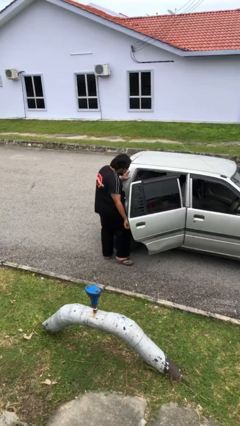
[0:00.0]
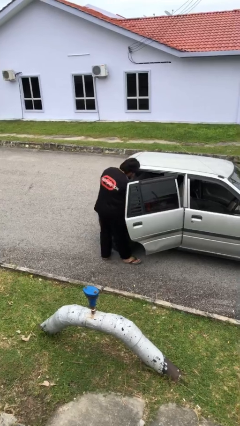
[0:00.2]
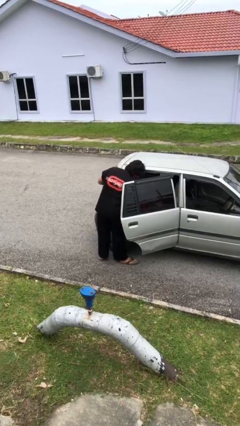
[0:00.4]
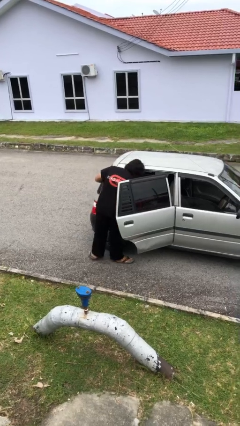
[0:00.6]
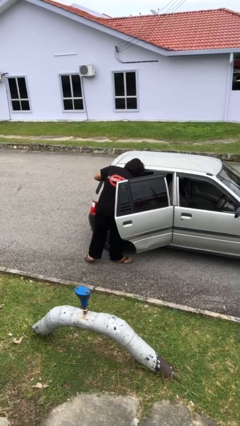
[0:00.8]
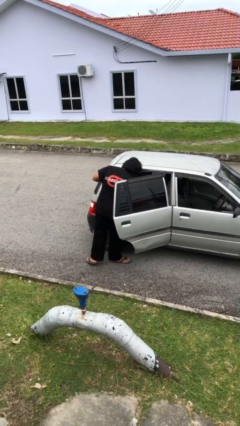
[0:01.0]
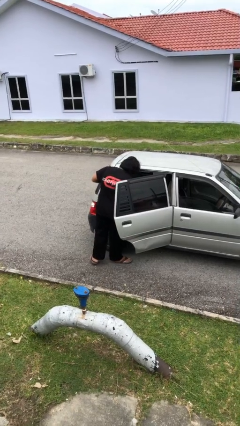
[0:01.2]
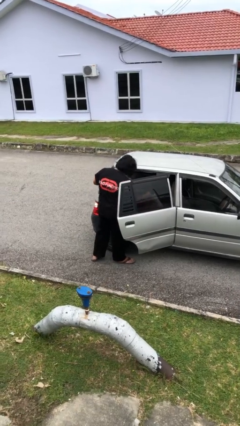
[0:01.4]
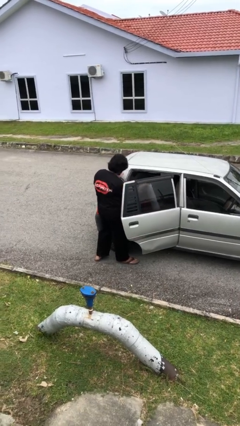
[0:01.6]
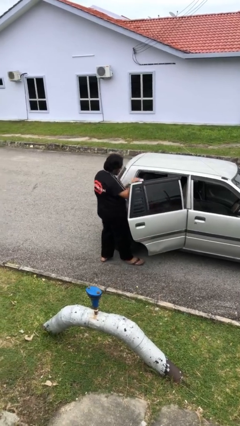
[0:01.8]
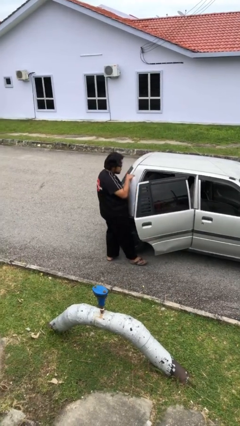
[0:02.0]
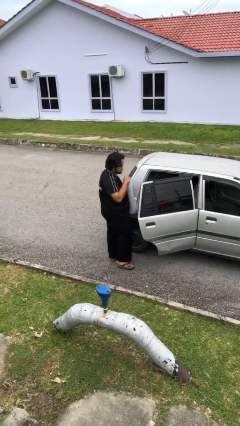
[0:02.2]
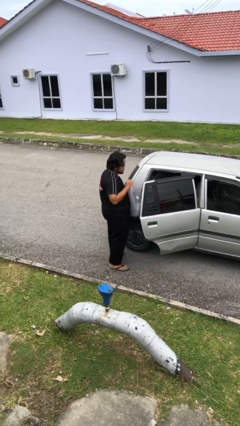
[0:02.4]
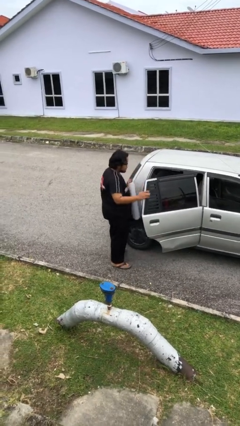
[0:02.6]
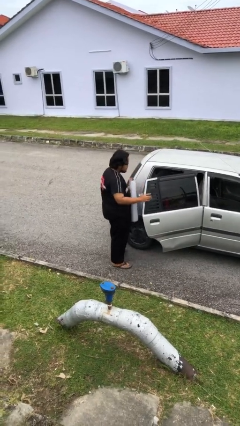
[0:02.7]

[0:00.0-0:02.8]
person unloads car

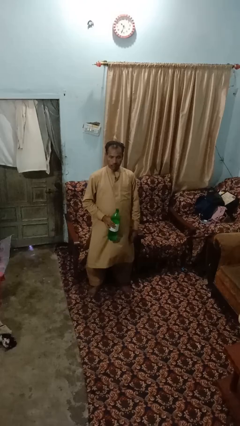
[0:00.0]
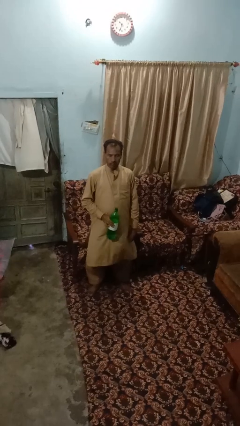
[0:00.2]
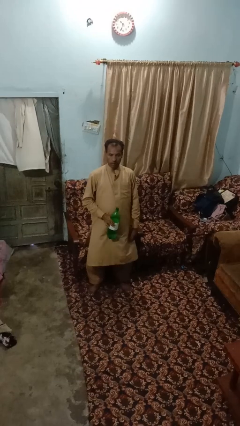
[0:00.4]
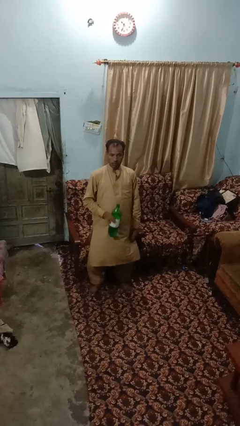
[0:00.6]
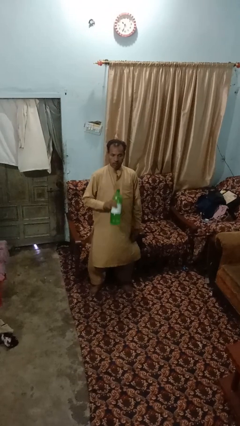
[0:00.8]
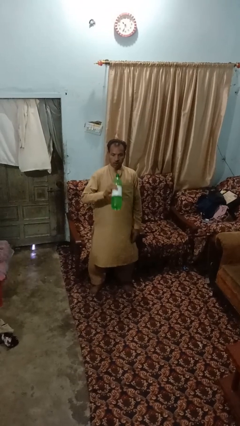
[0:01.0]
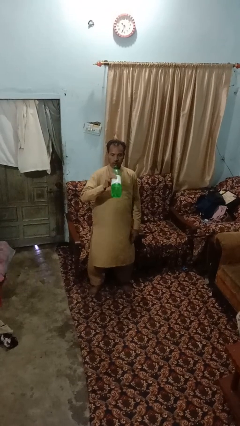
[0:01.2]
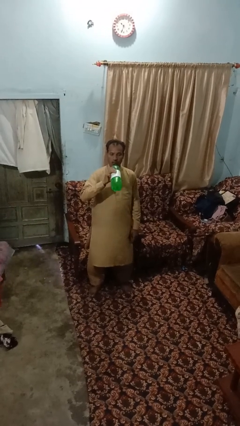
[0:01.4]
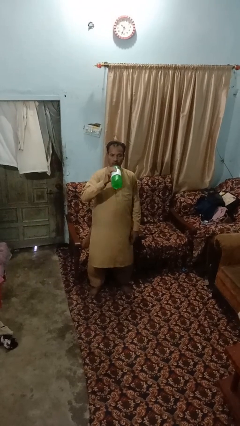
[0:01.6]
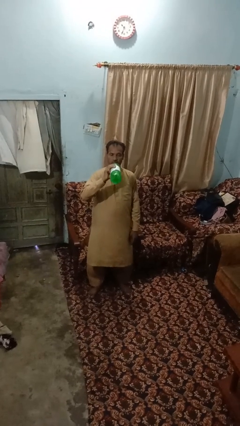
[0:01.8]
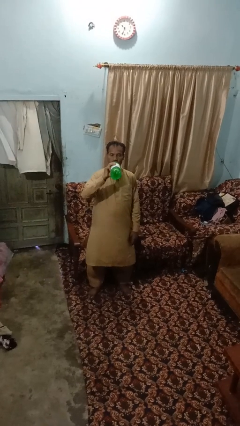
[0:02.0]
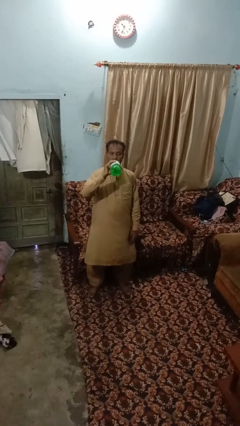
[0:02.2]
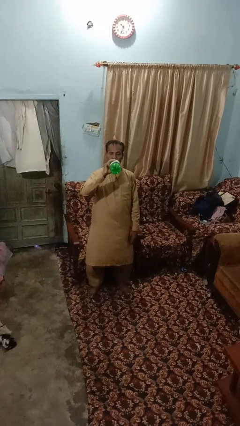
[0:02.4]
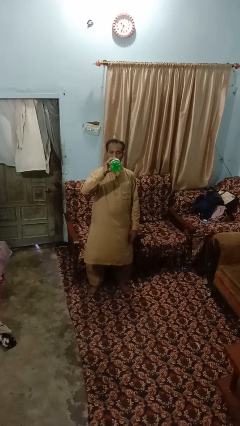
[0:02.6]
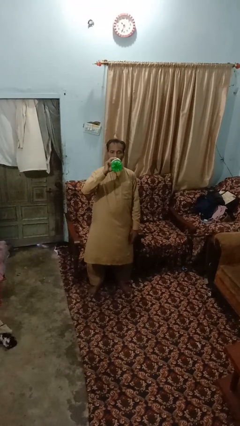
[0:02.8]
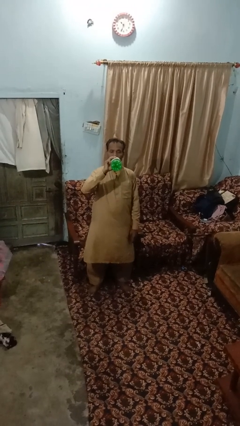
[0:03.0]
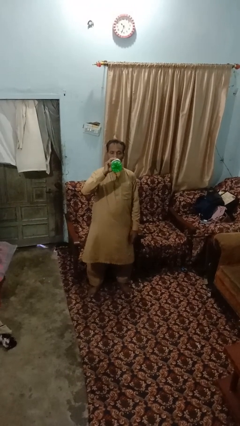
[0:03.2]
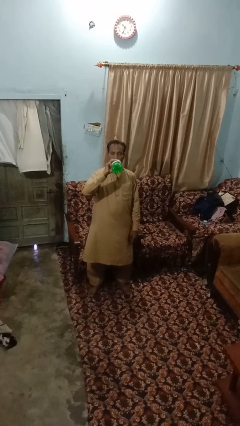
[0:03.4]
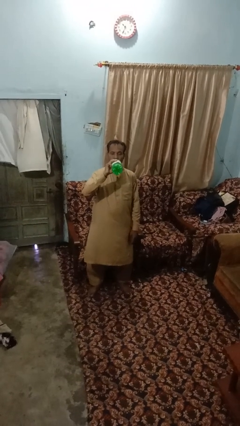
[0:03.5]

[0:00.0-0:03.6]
person drinks from bottle

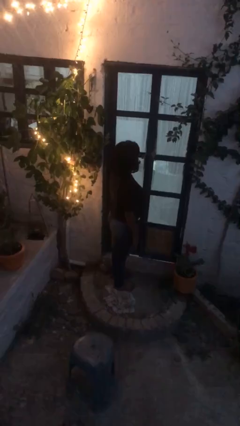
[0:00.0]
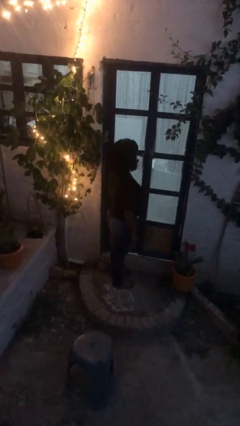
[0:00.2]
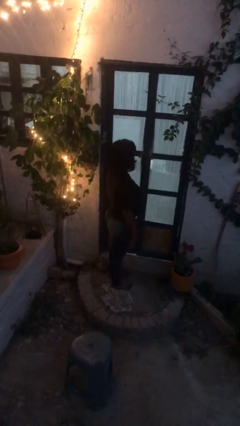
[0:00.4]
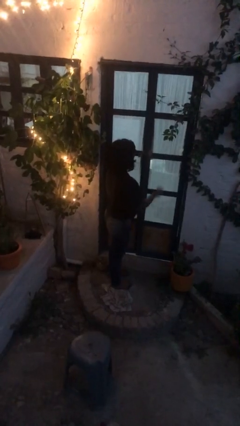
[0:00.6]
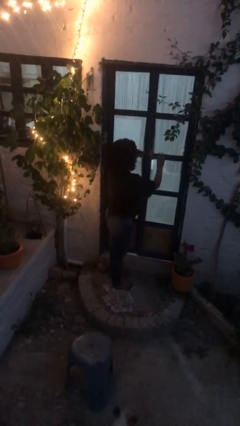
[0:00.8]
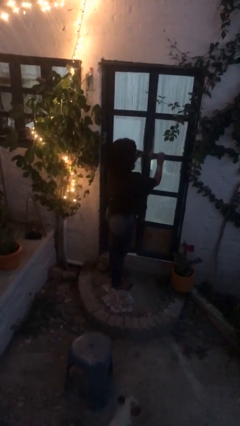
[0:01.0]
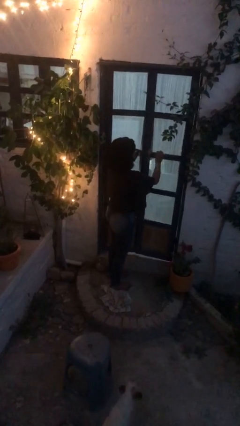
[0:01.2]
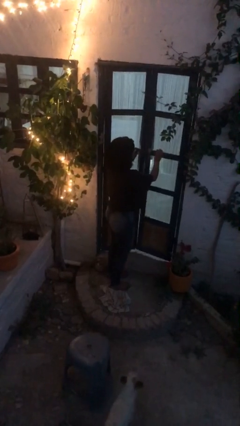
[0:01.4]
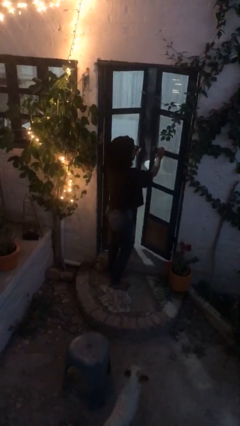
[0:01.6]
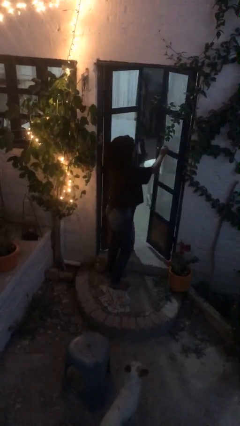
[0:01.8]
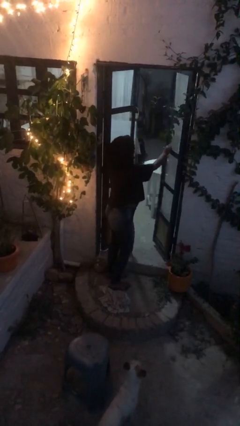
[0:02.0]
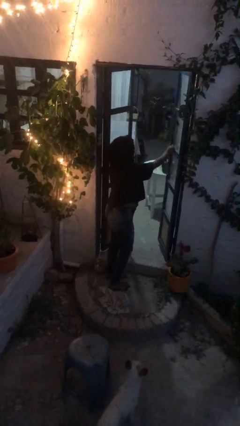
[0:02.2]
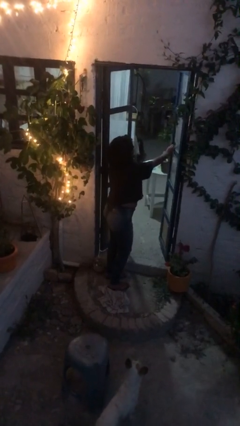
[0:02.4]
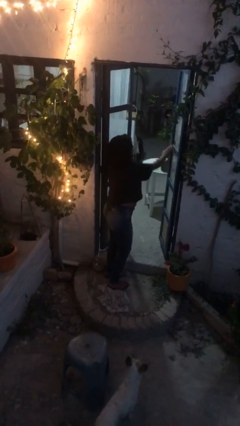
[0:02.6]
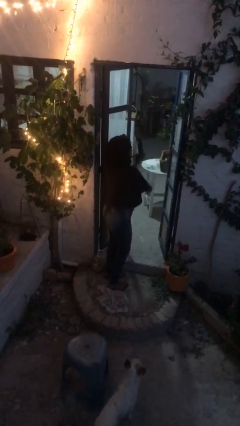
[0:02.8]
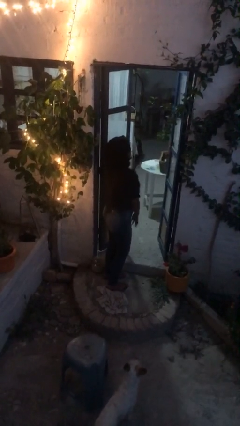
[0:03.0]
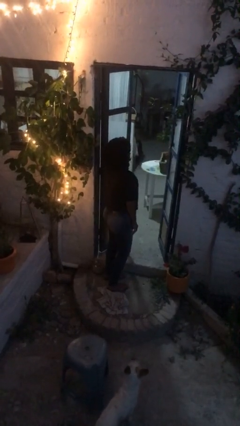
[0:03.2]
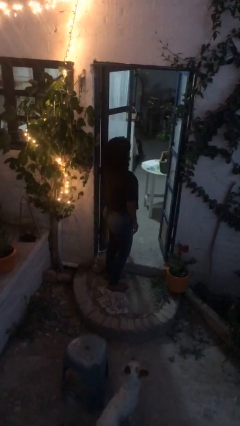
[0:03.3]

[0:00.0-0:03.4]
person opens facility door

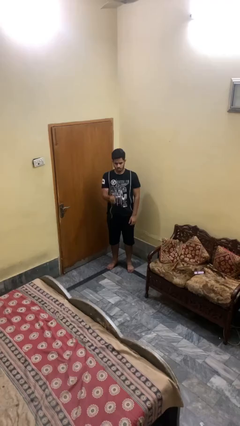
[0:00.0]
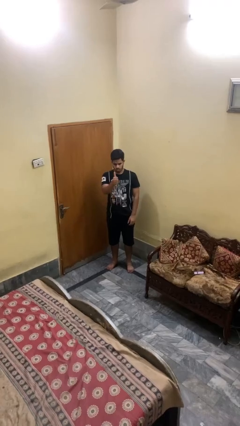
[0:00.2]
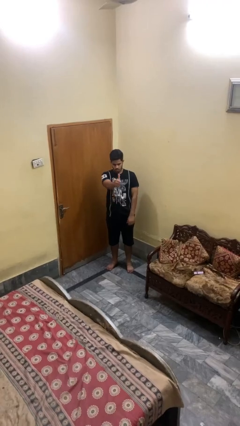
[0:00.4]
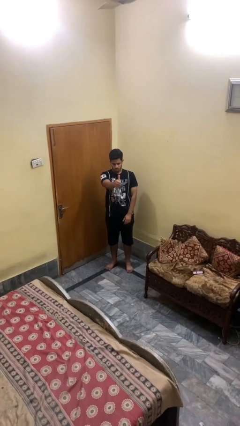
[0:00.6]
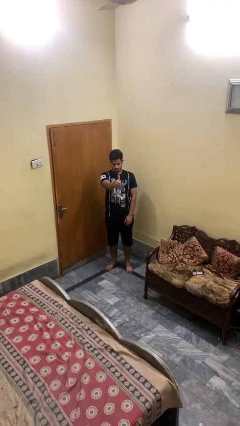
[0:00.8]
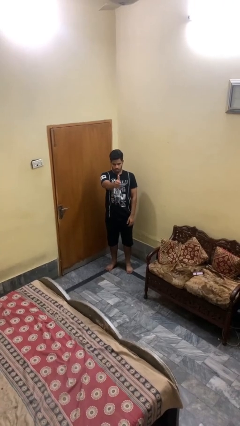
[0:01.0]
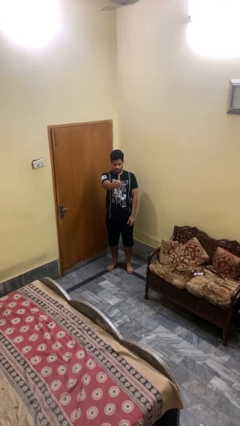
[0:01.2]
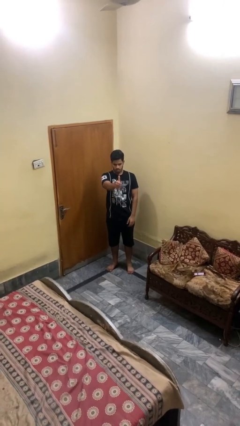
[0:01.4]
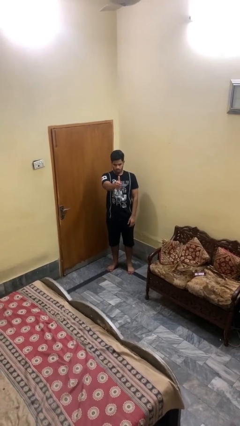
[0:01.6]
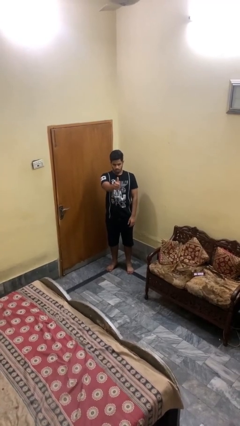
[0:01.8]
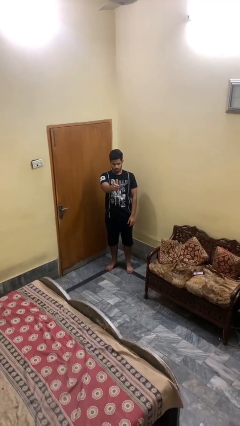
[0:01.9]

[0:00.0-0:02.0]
person gestures thumbs up

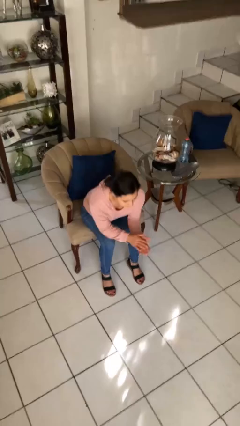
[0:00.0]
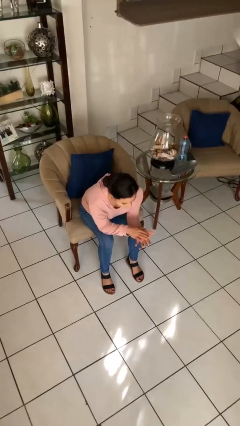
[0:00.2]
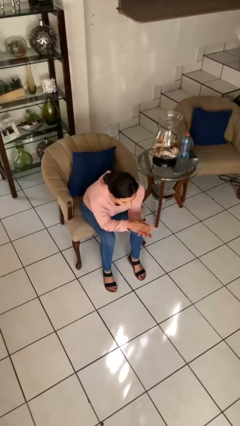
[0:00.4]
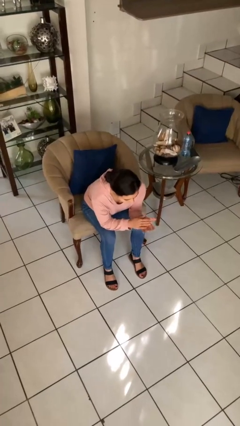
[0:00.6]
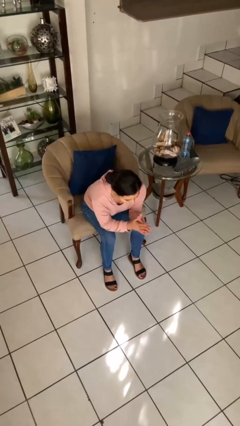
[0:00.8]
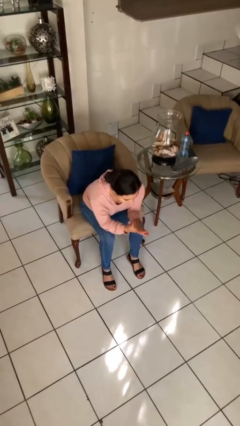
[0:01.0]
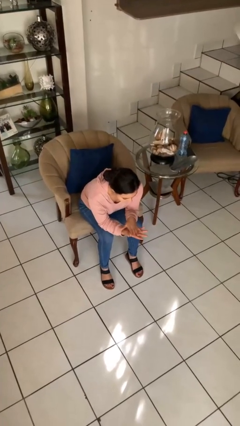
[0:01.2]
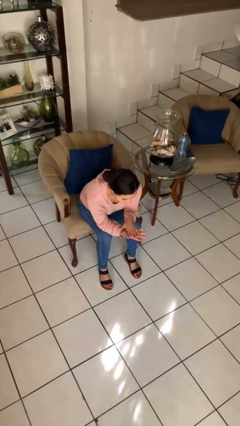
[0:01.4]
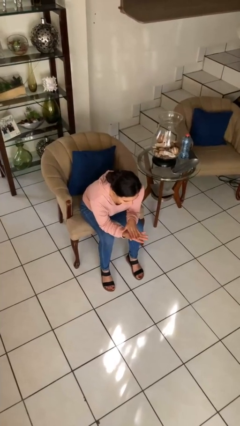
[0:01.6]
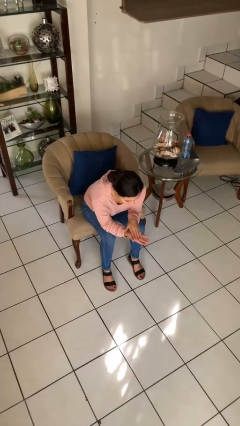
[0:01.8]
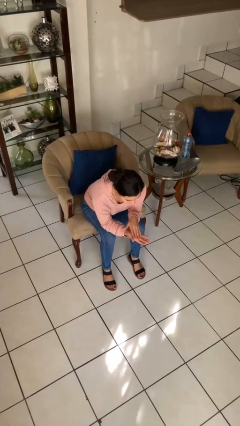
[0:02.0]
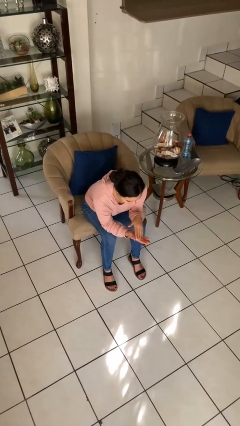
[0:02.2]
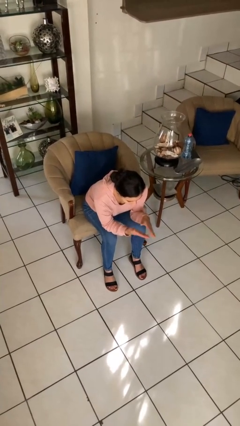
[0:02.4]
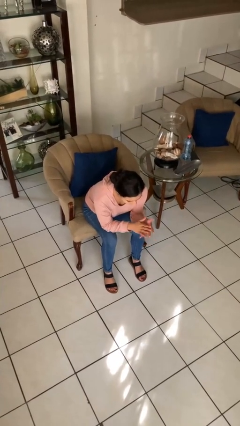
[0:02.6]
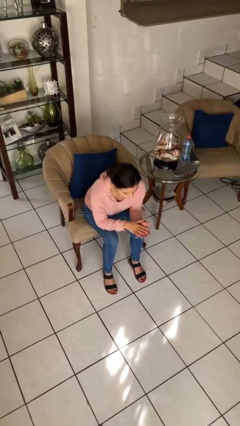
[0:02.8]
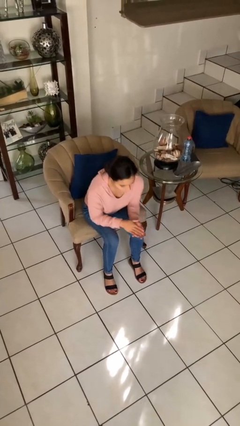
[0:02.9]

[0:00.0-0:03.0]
person looks at hands in lap

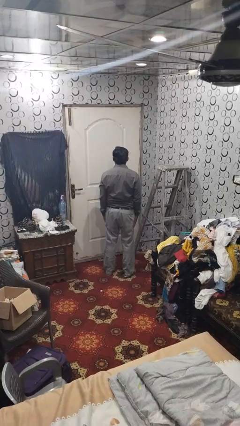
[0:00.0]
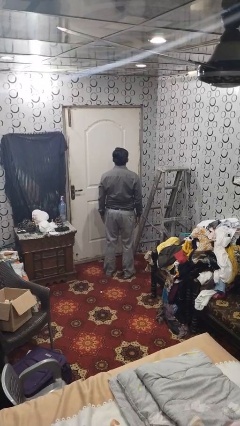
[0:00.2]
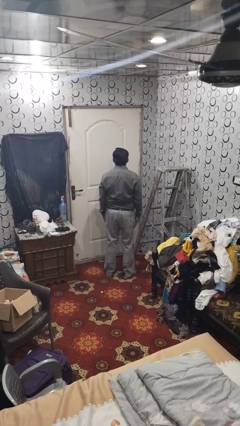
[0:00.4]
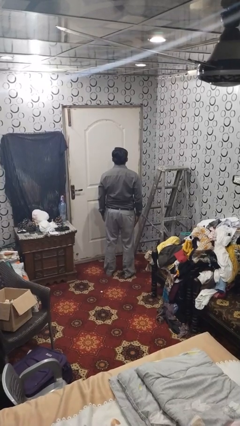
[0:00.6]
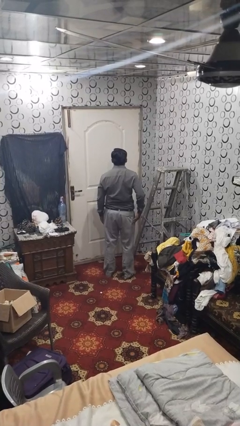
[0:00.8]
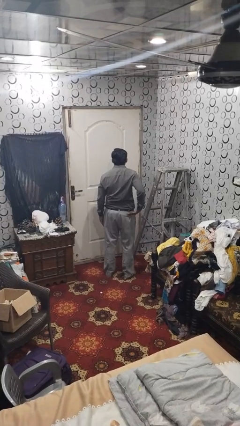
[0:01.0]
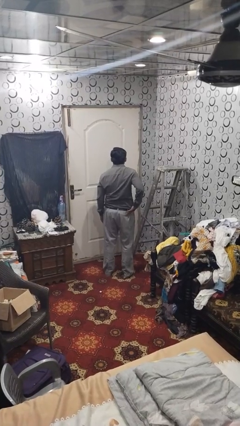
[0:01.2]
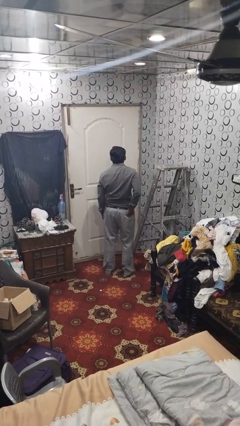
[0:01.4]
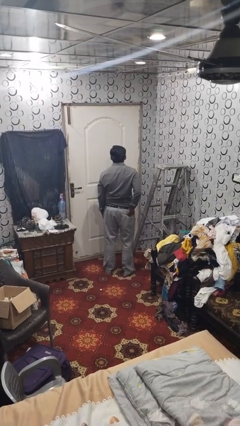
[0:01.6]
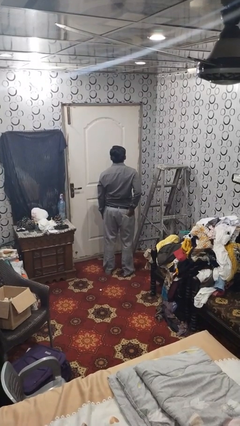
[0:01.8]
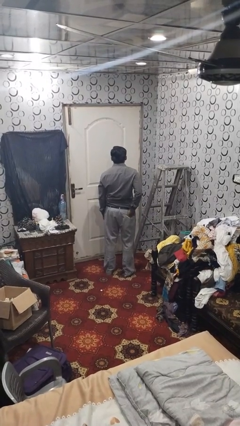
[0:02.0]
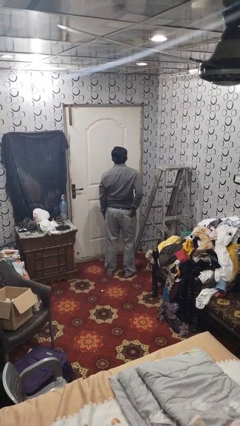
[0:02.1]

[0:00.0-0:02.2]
person puts hands in back pockets

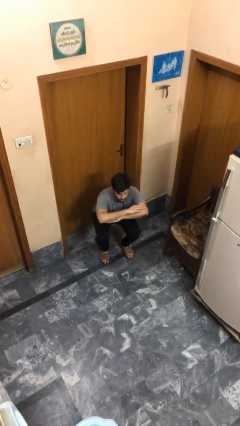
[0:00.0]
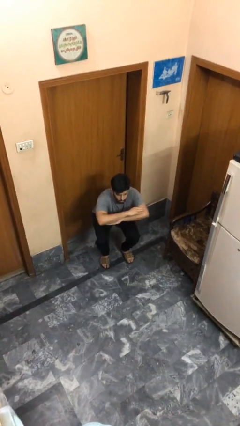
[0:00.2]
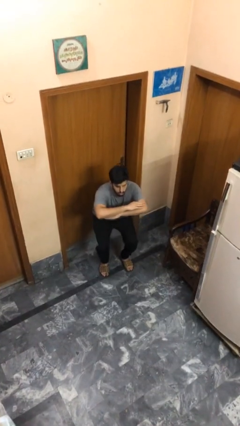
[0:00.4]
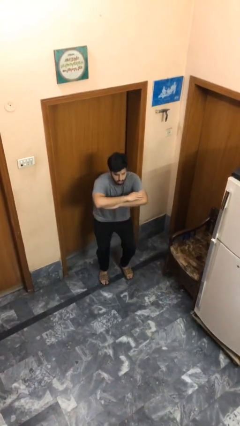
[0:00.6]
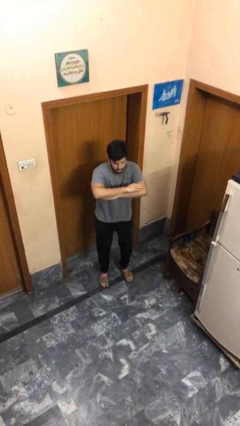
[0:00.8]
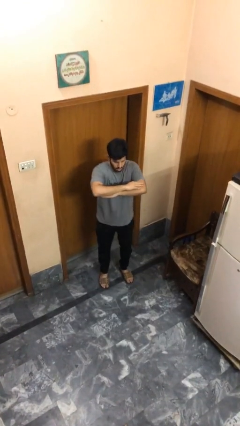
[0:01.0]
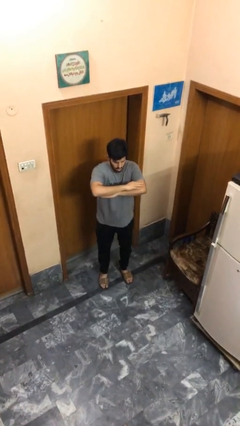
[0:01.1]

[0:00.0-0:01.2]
person stands up
